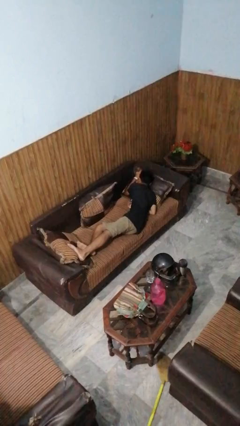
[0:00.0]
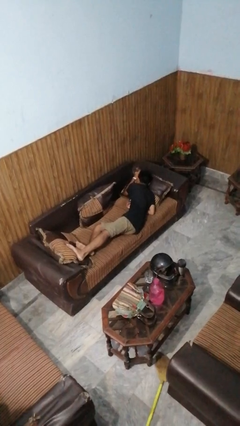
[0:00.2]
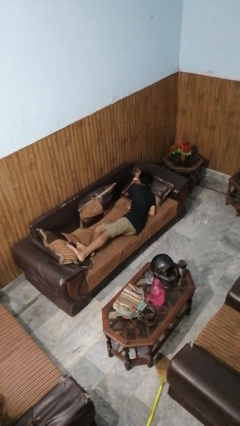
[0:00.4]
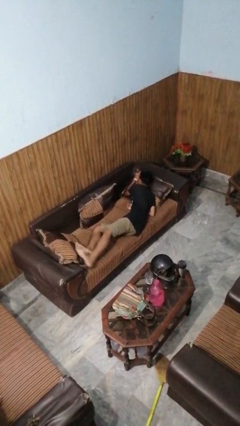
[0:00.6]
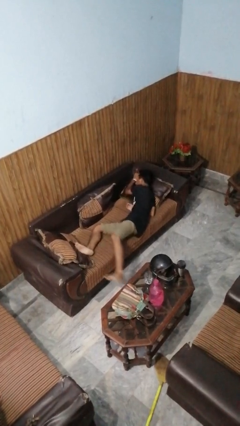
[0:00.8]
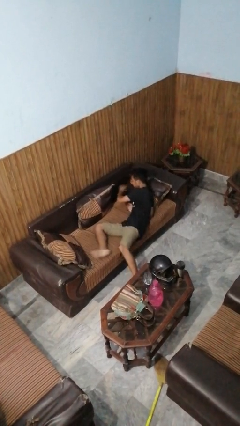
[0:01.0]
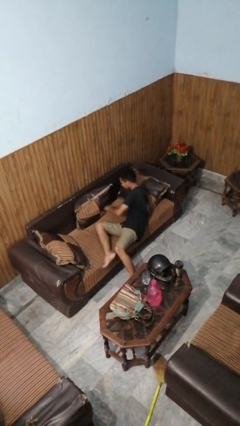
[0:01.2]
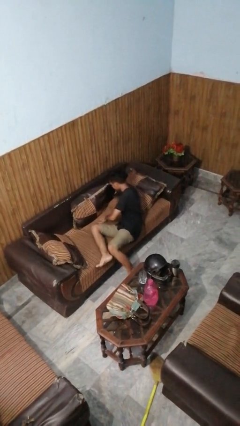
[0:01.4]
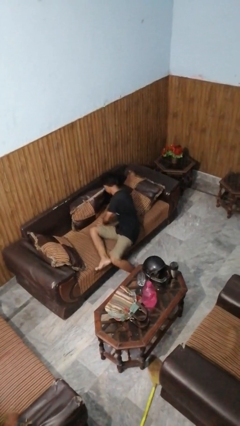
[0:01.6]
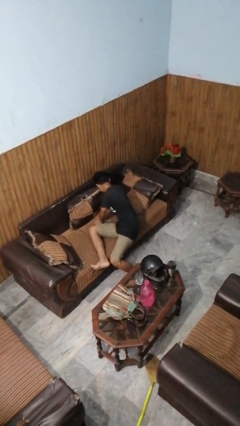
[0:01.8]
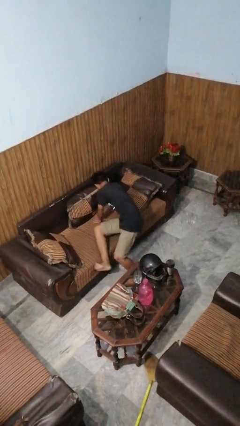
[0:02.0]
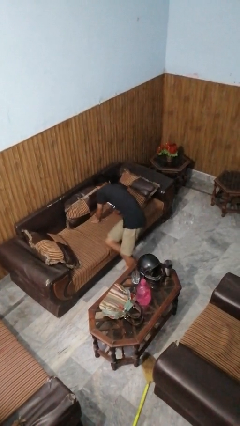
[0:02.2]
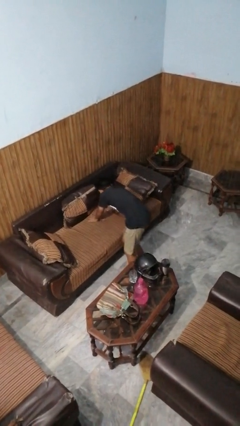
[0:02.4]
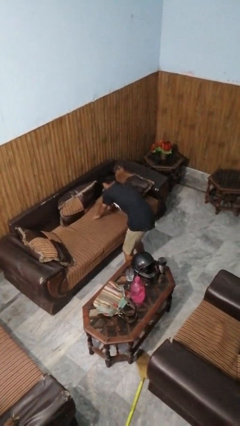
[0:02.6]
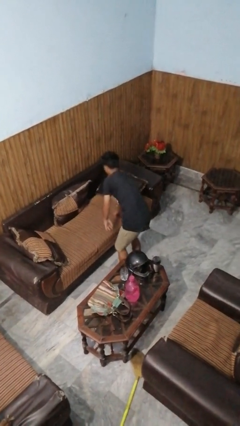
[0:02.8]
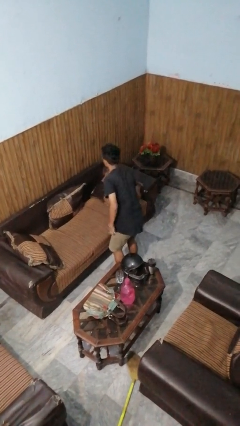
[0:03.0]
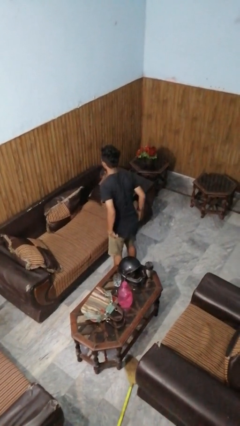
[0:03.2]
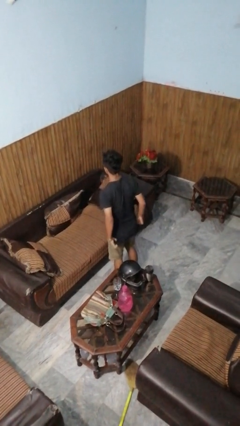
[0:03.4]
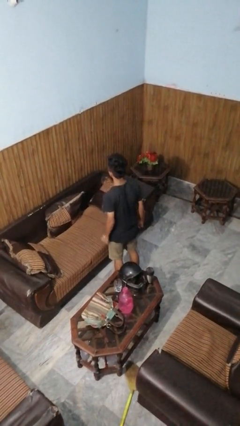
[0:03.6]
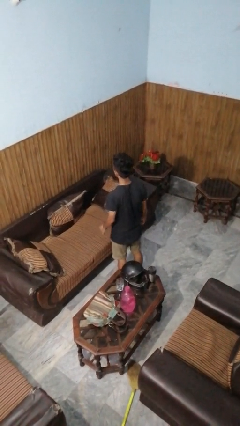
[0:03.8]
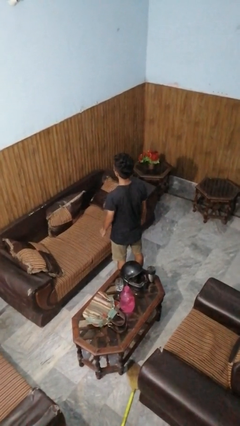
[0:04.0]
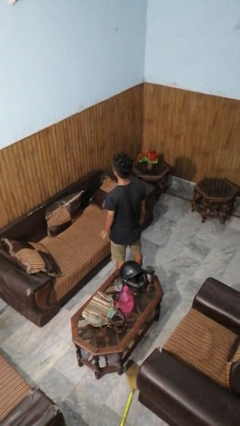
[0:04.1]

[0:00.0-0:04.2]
person stands up

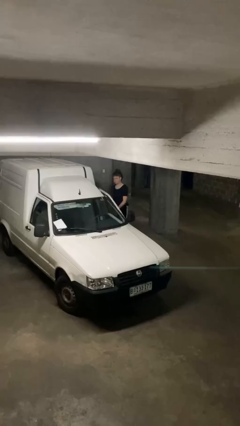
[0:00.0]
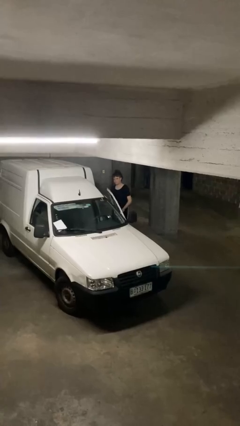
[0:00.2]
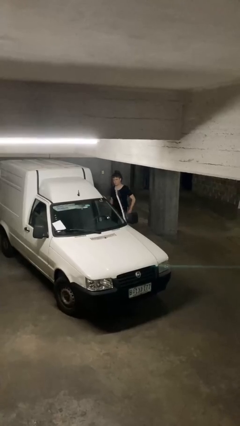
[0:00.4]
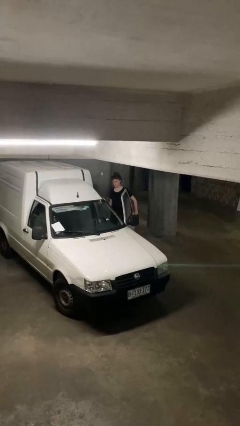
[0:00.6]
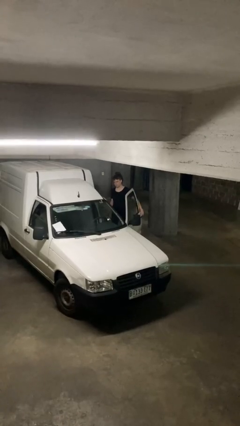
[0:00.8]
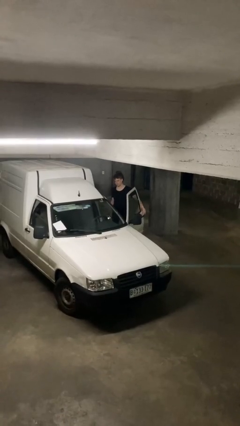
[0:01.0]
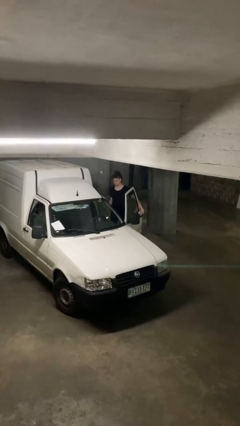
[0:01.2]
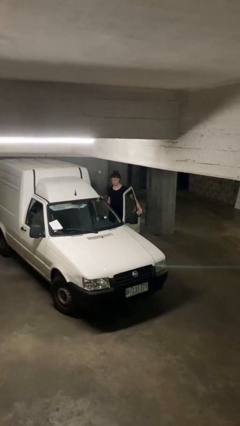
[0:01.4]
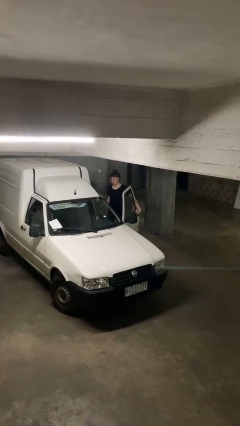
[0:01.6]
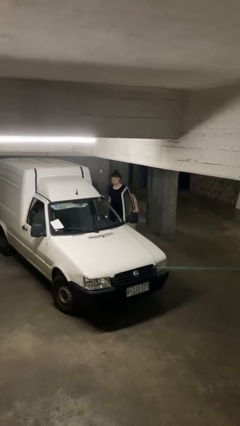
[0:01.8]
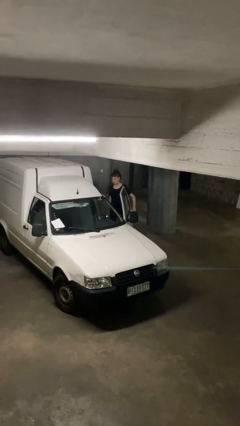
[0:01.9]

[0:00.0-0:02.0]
person opens car door

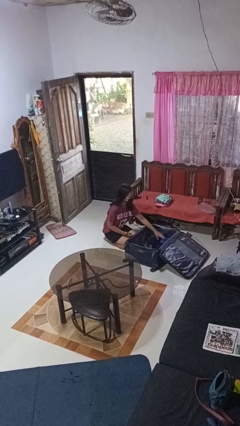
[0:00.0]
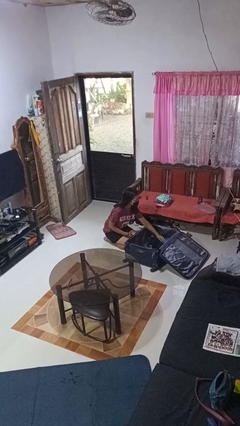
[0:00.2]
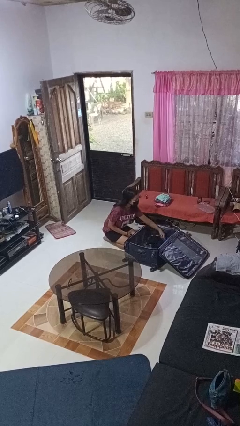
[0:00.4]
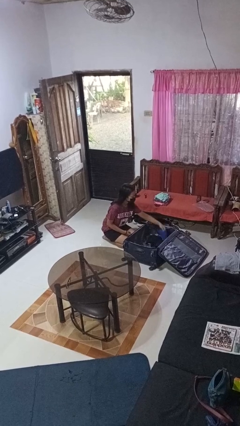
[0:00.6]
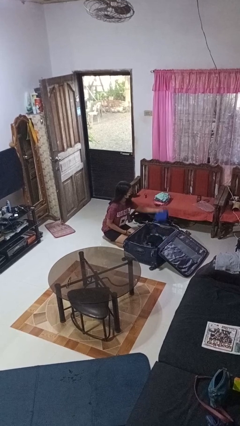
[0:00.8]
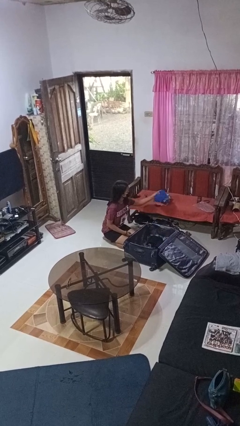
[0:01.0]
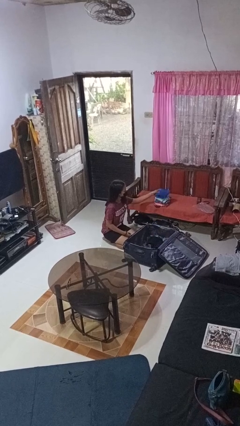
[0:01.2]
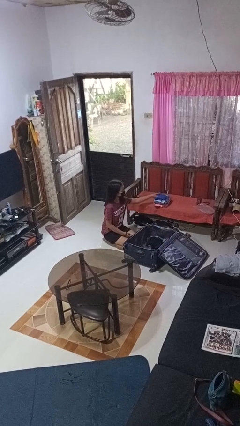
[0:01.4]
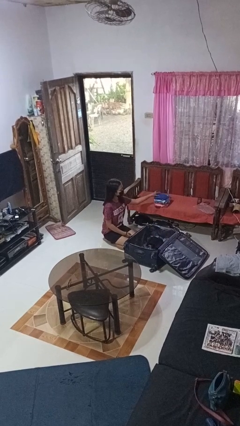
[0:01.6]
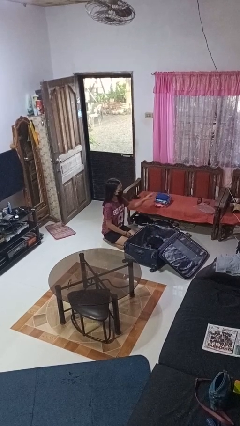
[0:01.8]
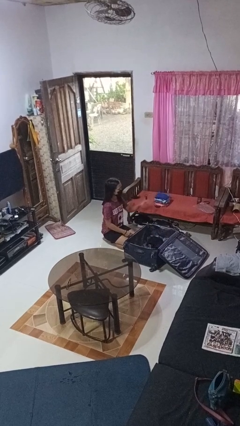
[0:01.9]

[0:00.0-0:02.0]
person unloads clothes from suitcase

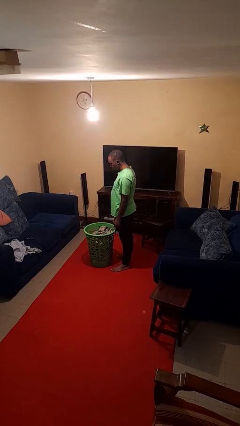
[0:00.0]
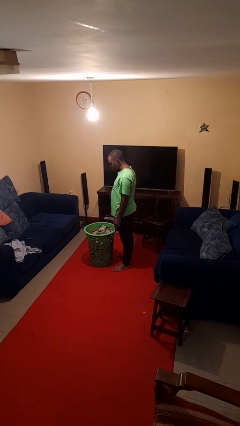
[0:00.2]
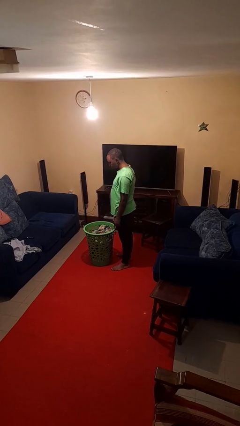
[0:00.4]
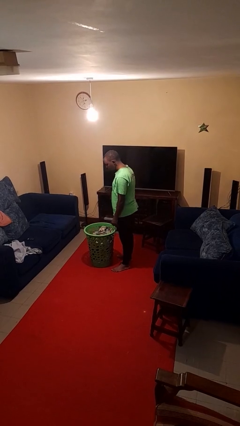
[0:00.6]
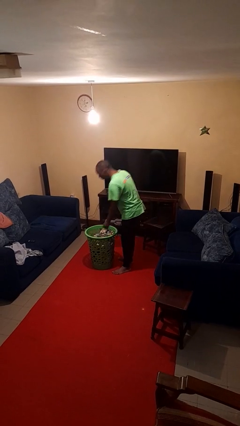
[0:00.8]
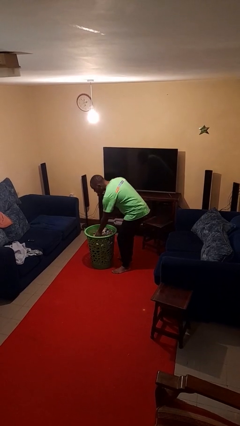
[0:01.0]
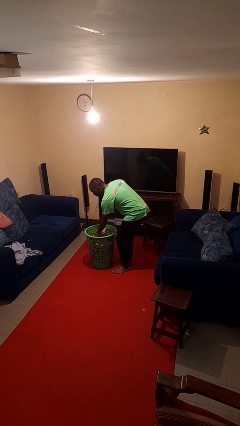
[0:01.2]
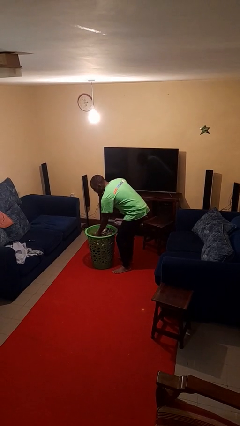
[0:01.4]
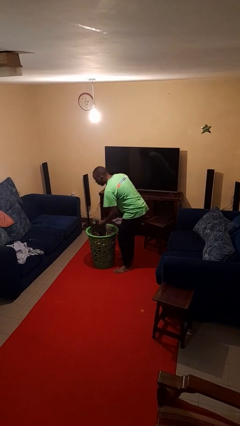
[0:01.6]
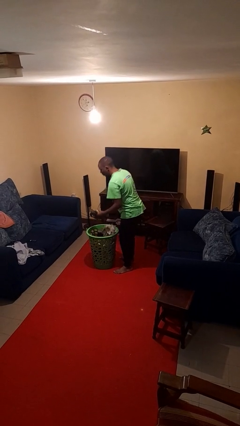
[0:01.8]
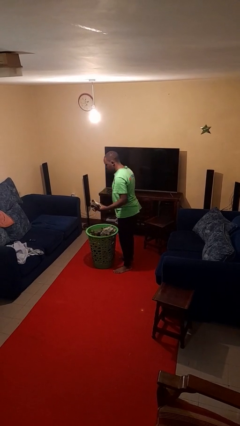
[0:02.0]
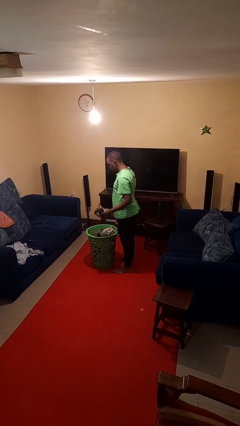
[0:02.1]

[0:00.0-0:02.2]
person takes object from basket

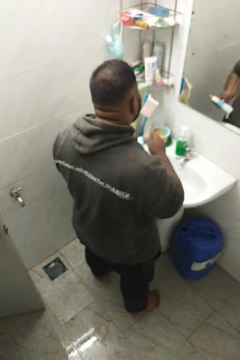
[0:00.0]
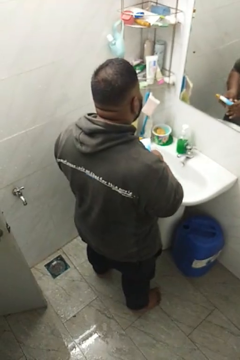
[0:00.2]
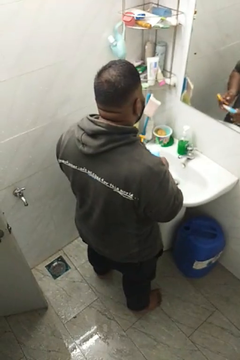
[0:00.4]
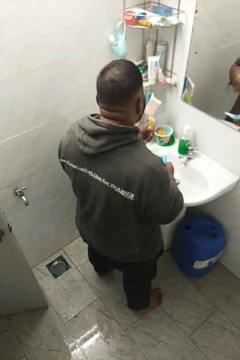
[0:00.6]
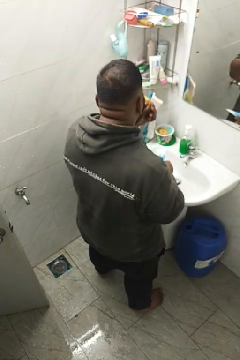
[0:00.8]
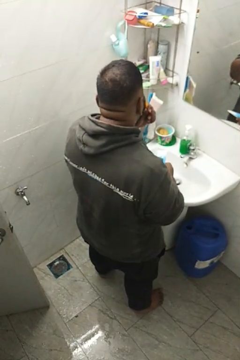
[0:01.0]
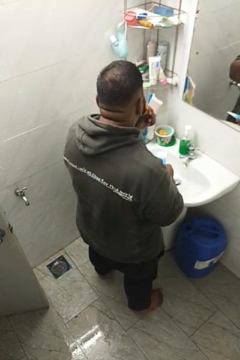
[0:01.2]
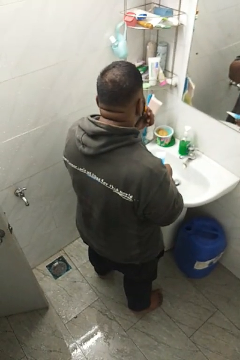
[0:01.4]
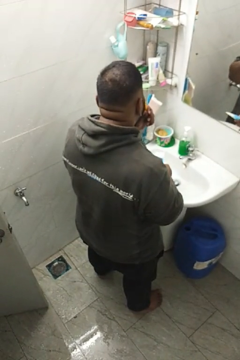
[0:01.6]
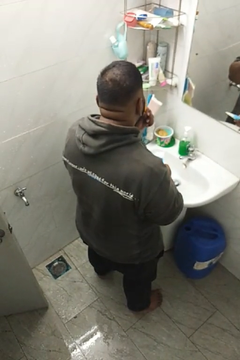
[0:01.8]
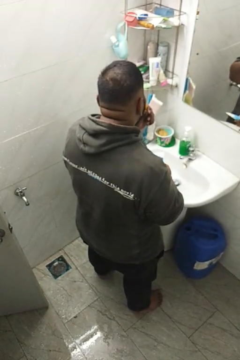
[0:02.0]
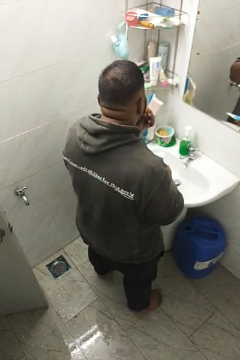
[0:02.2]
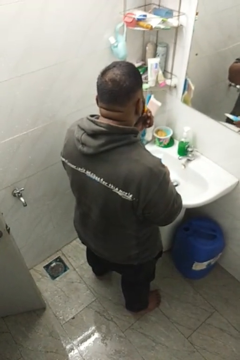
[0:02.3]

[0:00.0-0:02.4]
person shaves face

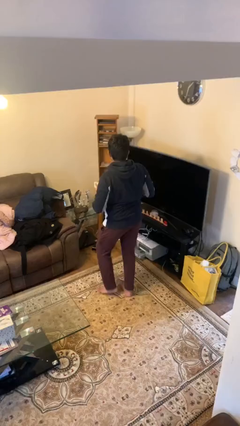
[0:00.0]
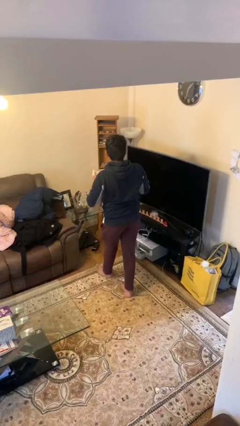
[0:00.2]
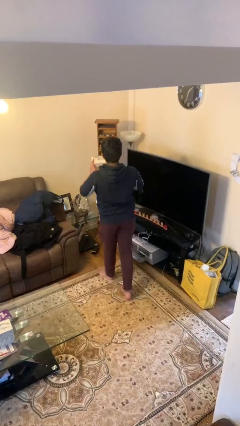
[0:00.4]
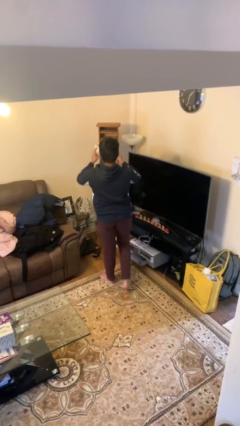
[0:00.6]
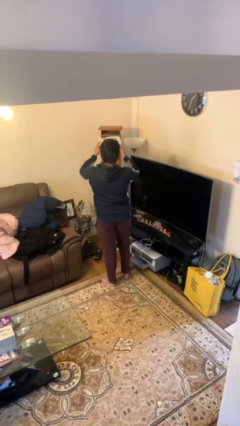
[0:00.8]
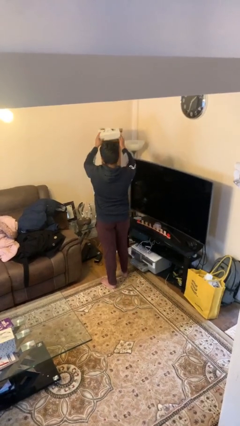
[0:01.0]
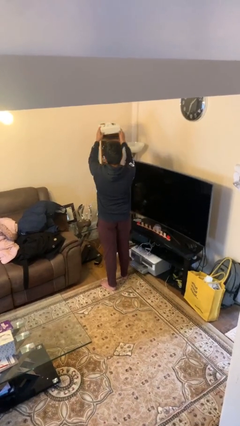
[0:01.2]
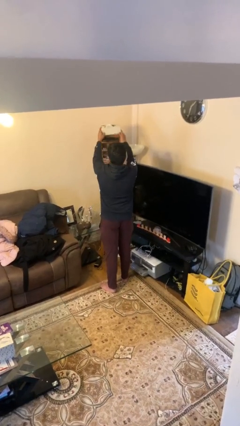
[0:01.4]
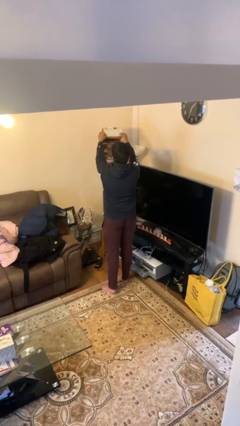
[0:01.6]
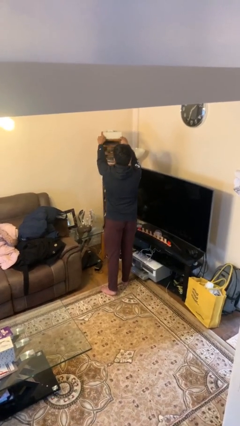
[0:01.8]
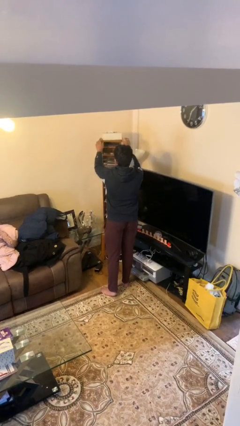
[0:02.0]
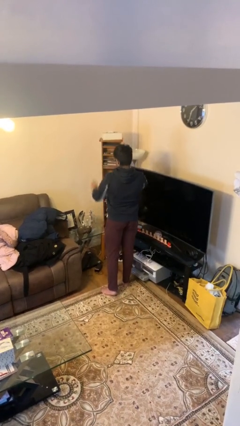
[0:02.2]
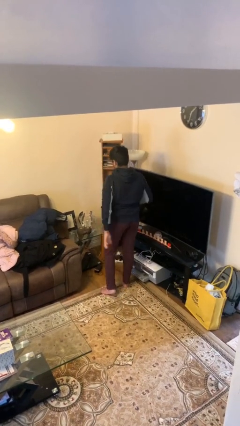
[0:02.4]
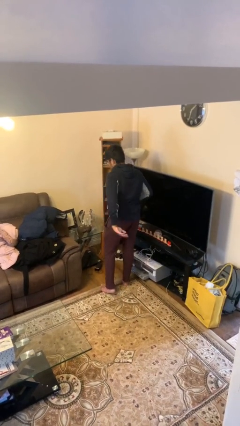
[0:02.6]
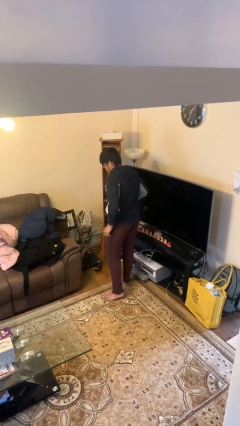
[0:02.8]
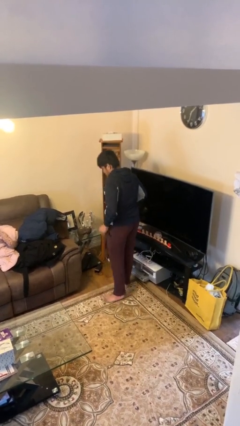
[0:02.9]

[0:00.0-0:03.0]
person puts down object on shelf

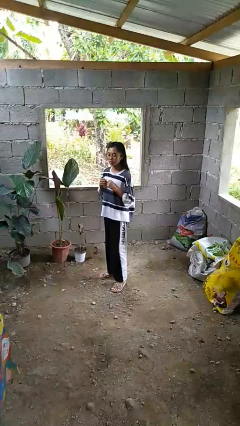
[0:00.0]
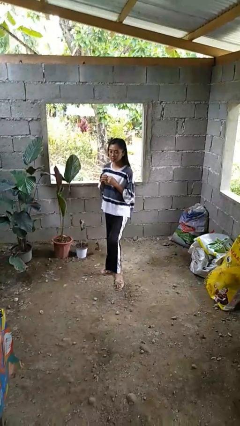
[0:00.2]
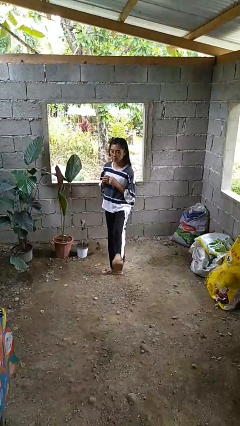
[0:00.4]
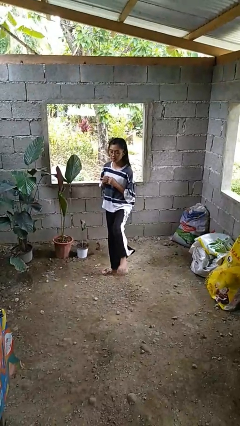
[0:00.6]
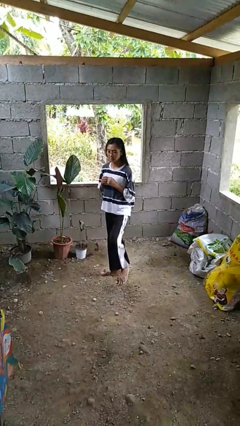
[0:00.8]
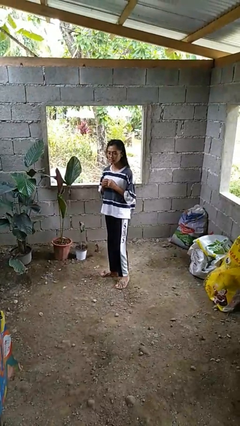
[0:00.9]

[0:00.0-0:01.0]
person karate kicks

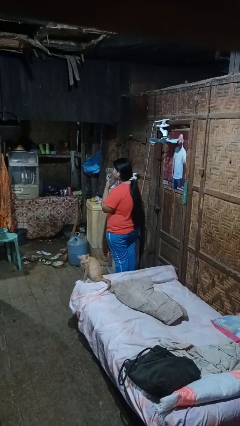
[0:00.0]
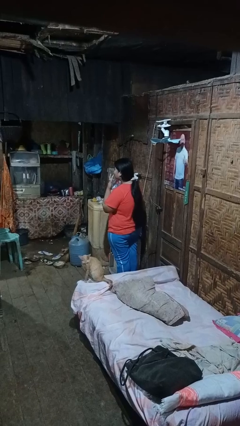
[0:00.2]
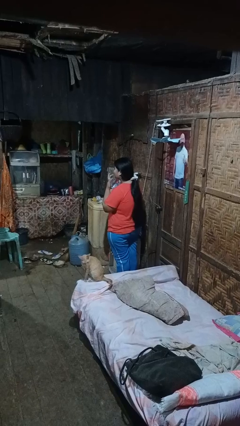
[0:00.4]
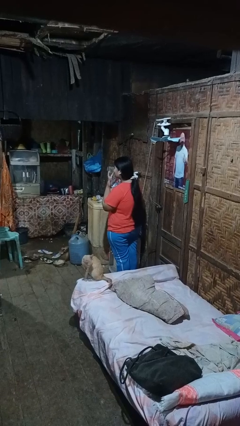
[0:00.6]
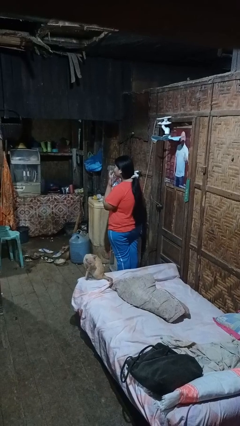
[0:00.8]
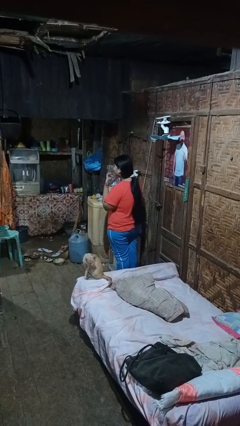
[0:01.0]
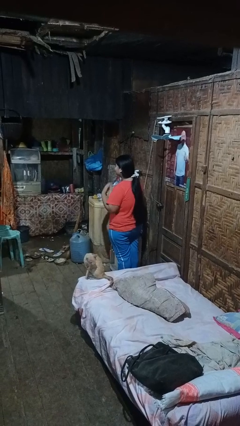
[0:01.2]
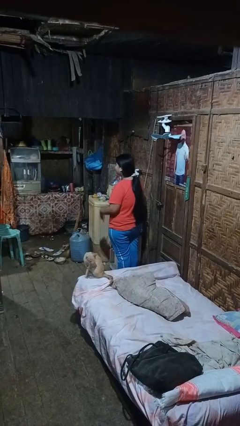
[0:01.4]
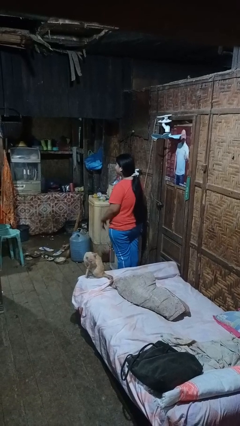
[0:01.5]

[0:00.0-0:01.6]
person licks fingers
